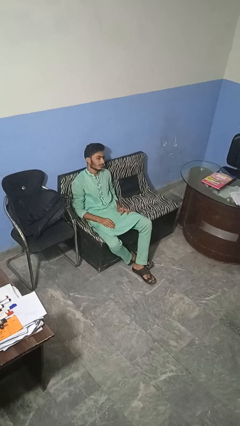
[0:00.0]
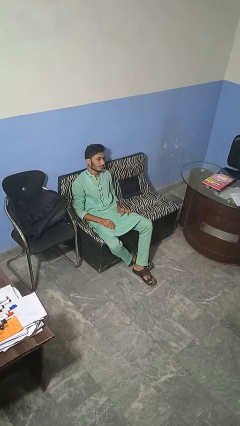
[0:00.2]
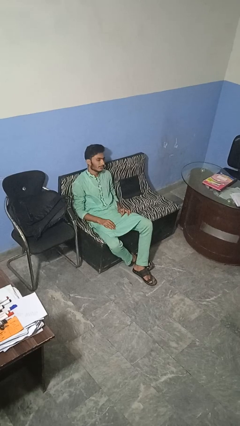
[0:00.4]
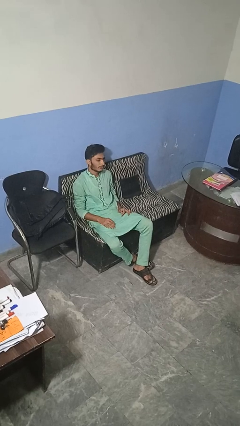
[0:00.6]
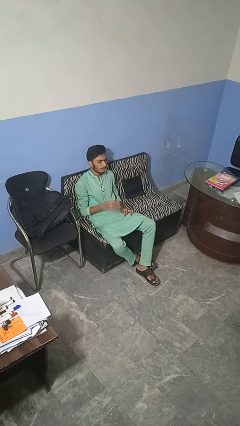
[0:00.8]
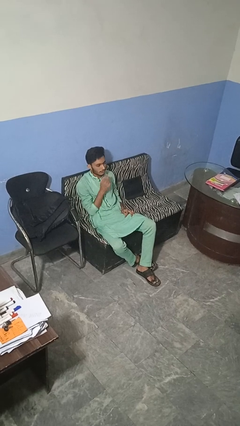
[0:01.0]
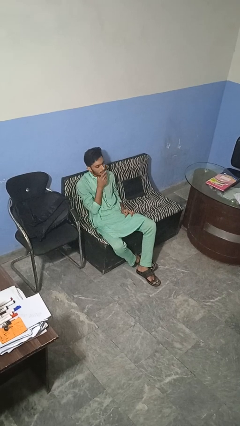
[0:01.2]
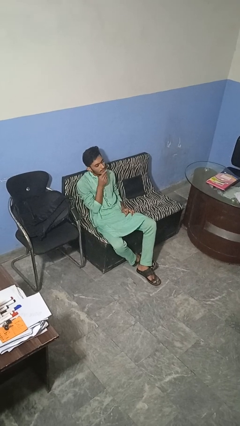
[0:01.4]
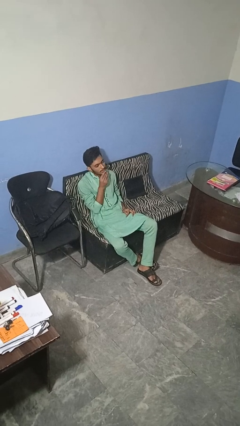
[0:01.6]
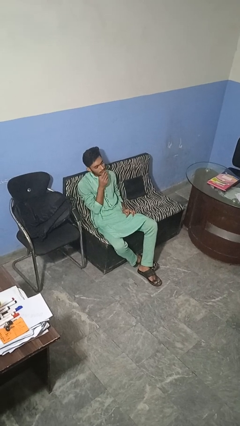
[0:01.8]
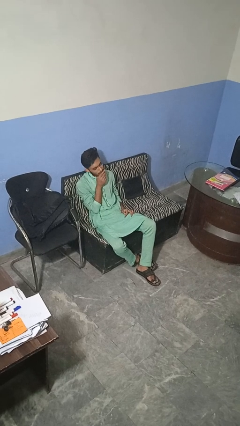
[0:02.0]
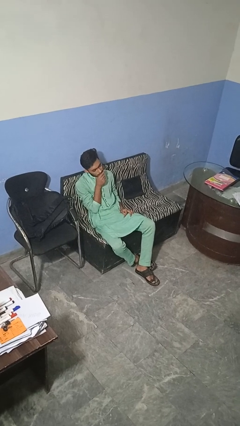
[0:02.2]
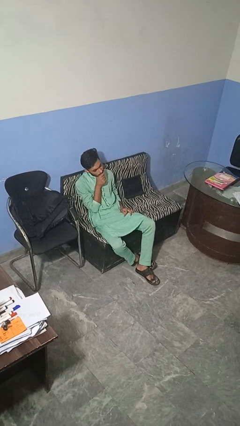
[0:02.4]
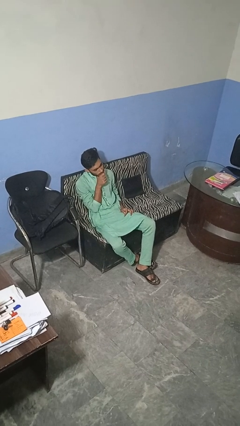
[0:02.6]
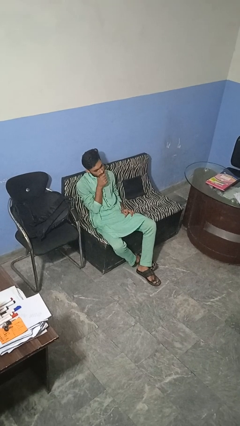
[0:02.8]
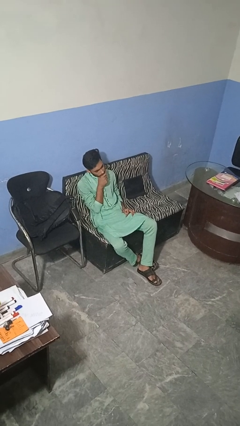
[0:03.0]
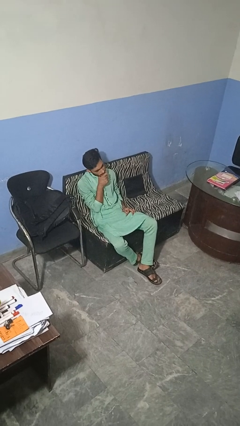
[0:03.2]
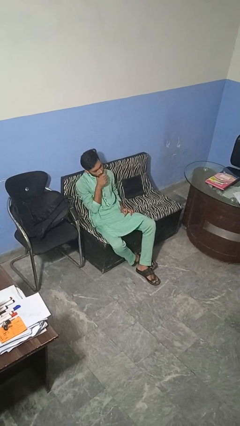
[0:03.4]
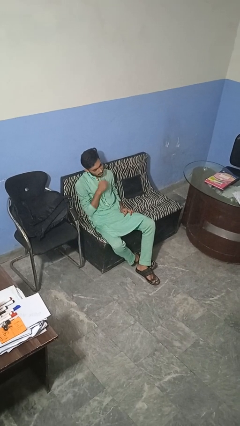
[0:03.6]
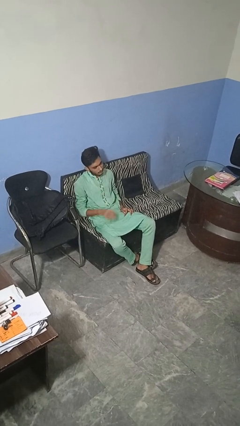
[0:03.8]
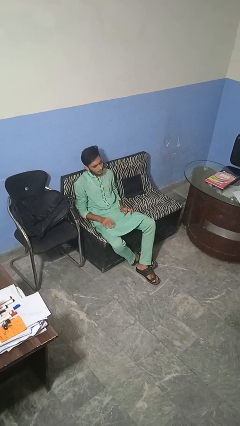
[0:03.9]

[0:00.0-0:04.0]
person strokes chin

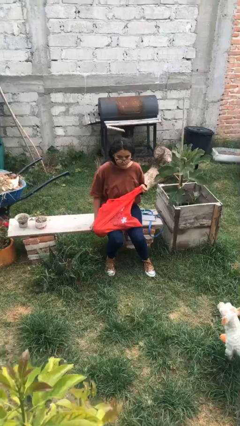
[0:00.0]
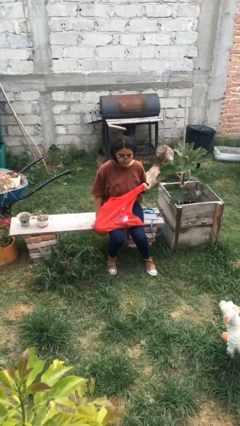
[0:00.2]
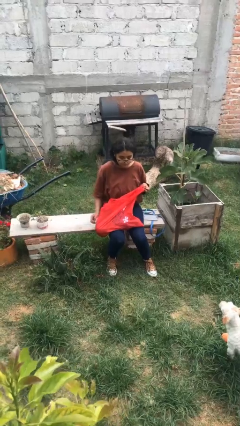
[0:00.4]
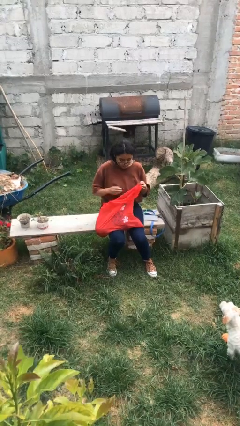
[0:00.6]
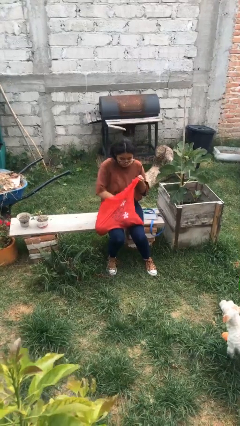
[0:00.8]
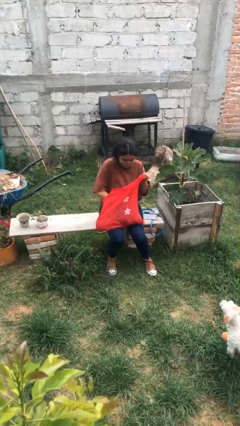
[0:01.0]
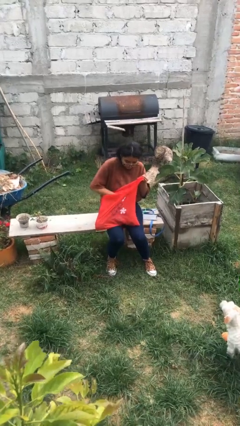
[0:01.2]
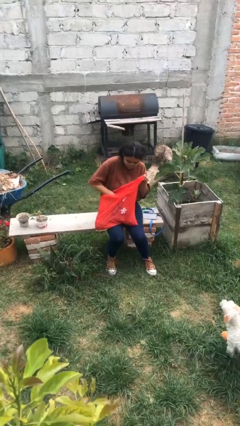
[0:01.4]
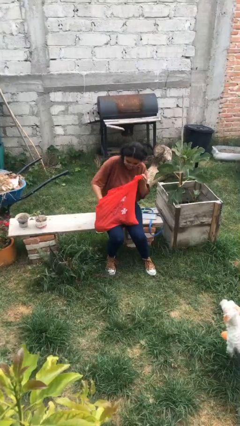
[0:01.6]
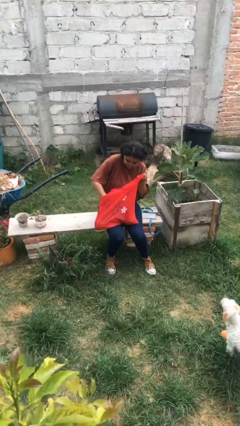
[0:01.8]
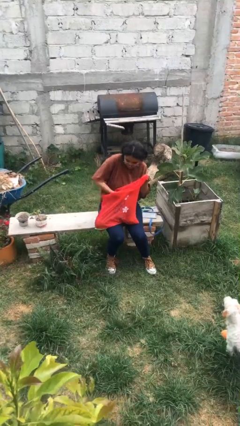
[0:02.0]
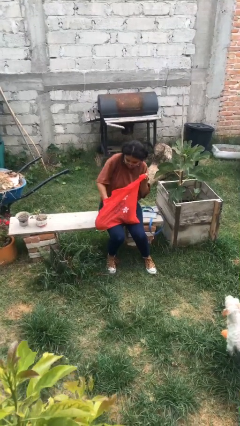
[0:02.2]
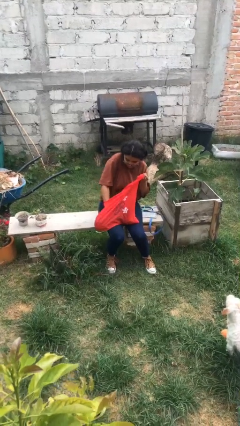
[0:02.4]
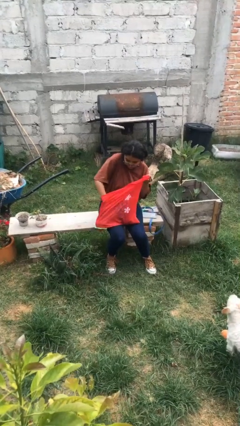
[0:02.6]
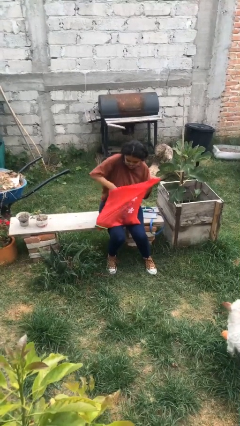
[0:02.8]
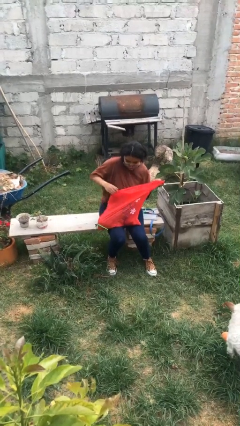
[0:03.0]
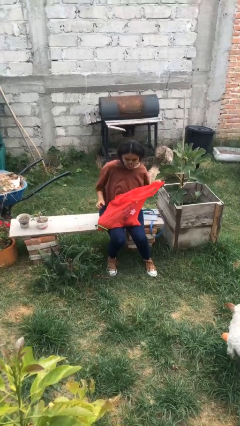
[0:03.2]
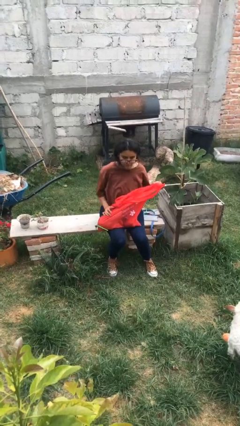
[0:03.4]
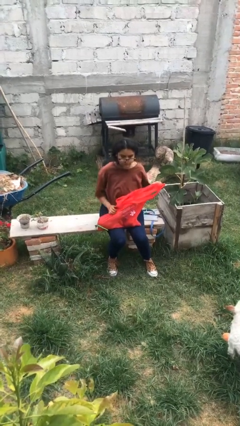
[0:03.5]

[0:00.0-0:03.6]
person searches in bag

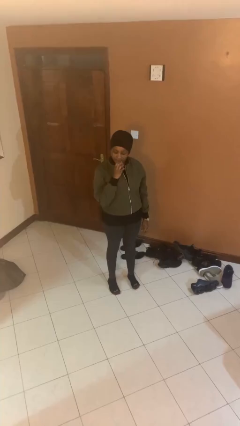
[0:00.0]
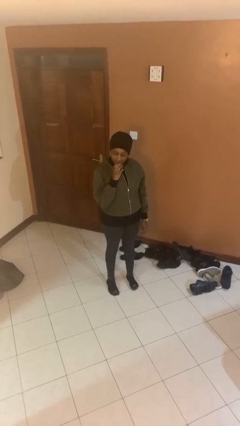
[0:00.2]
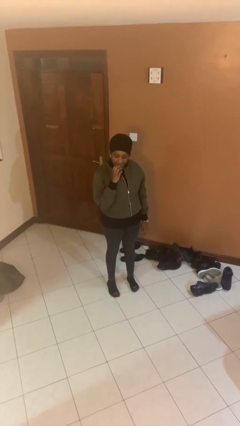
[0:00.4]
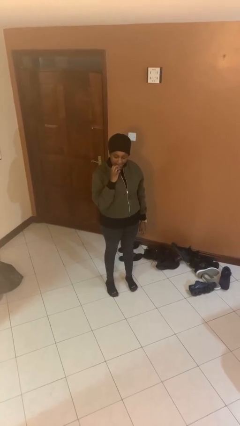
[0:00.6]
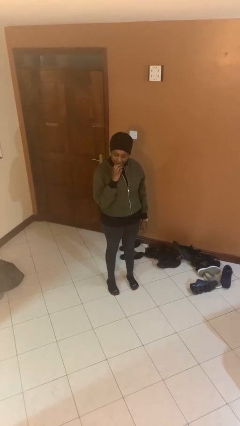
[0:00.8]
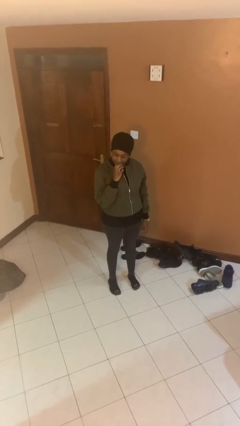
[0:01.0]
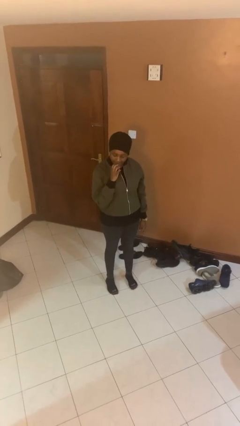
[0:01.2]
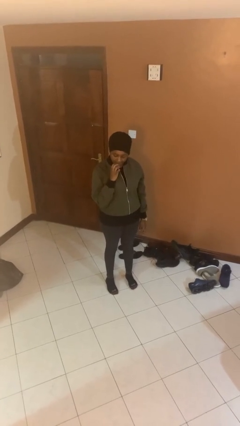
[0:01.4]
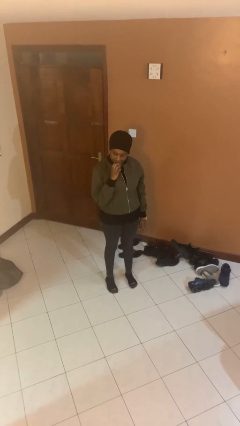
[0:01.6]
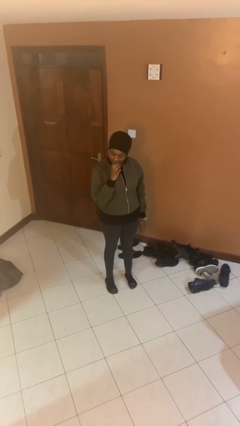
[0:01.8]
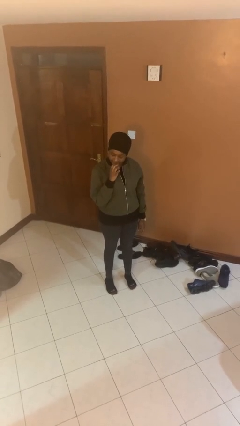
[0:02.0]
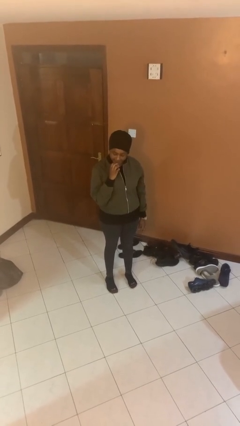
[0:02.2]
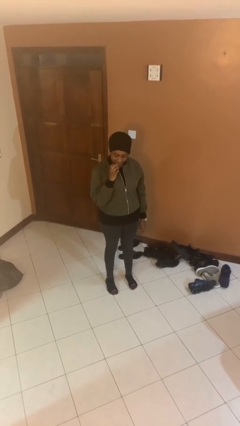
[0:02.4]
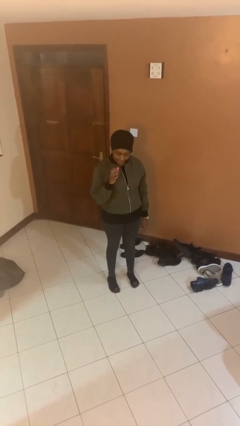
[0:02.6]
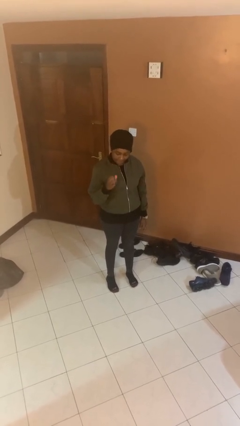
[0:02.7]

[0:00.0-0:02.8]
person applies lip makeup

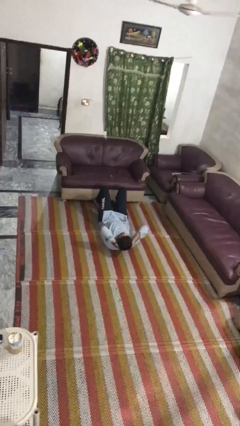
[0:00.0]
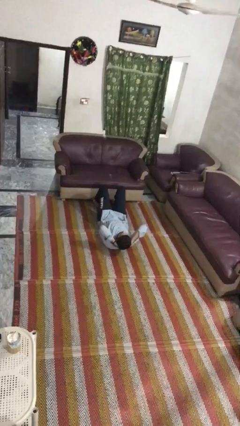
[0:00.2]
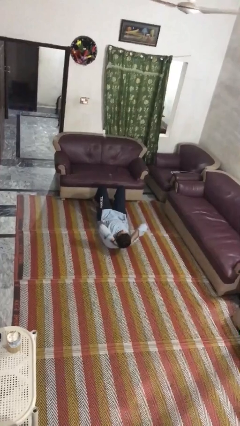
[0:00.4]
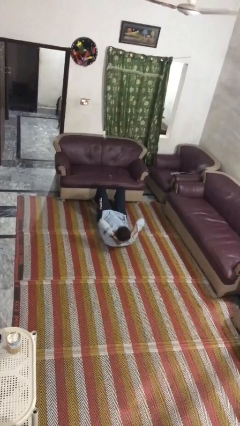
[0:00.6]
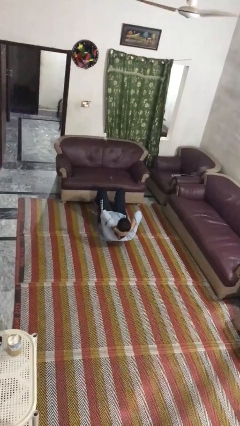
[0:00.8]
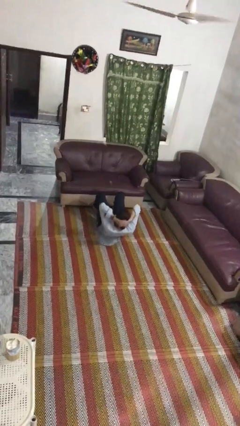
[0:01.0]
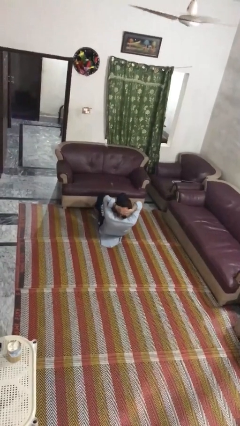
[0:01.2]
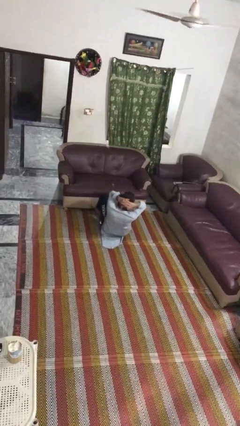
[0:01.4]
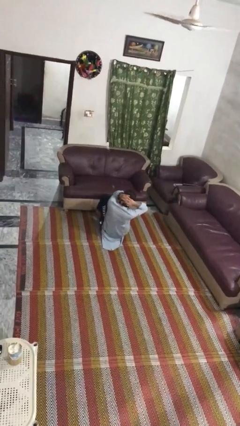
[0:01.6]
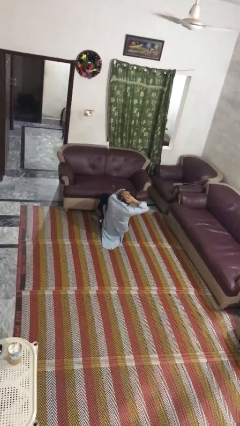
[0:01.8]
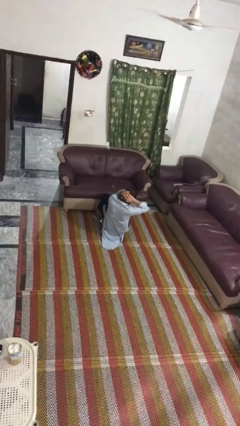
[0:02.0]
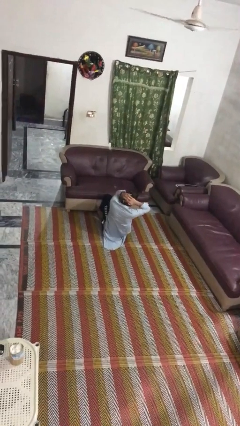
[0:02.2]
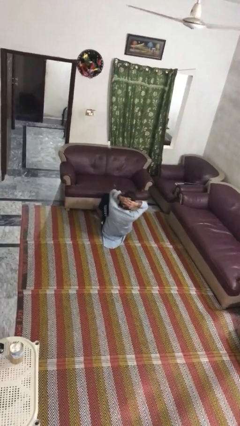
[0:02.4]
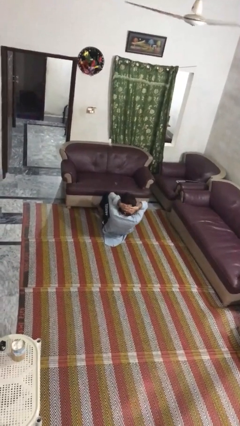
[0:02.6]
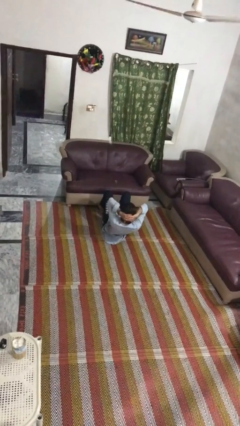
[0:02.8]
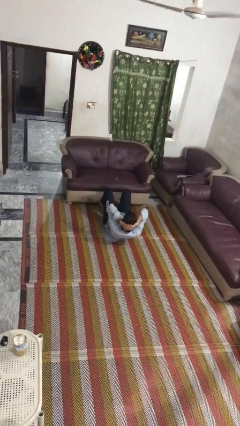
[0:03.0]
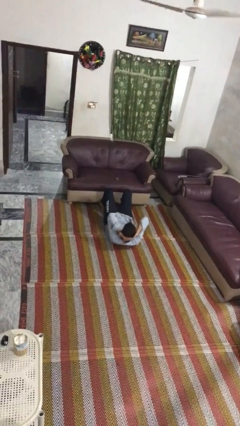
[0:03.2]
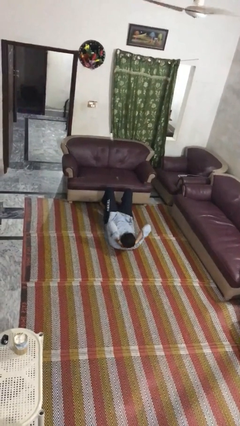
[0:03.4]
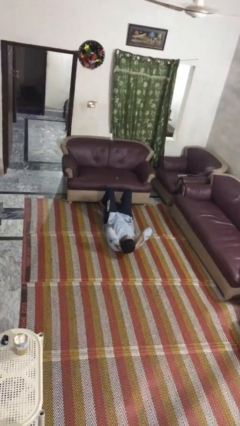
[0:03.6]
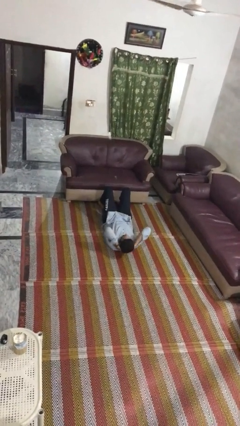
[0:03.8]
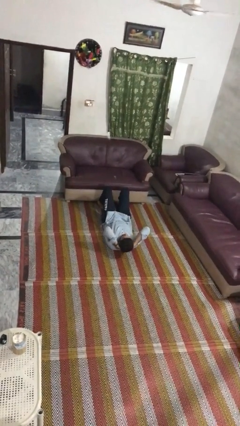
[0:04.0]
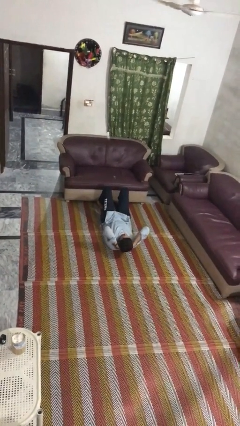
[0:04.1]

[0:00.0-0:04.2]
person exercises with situp

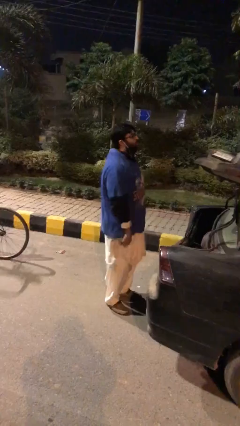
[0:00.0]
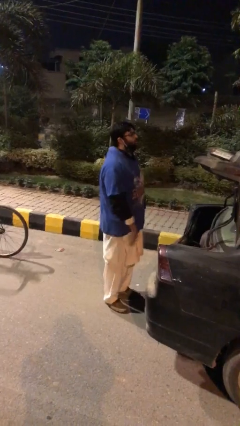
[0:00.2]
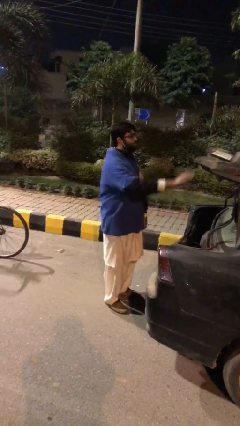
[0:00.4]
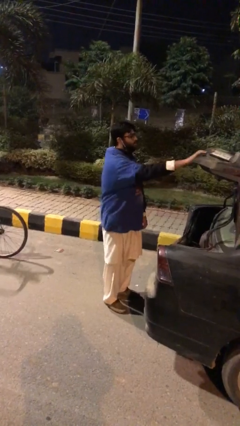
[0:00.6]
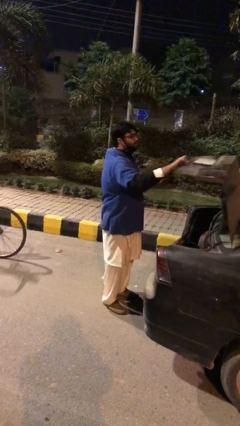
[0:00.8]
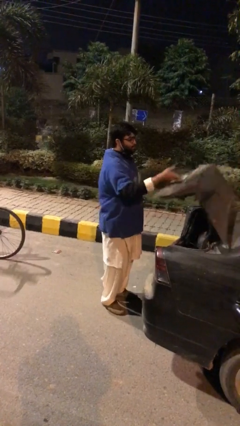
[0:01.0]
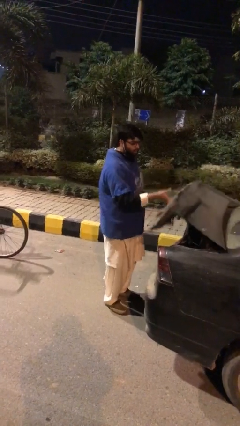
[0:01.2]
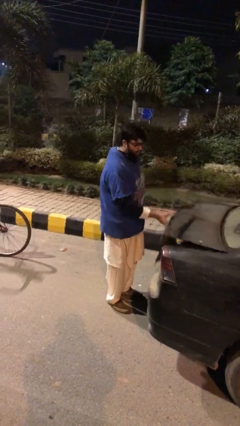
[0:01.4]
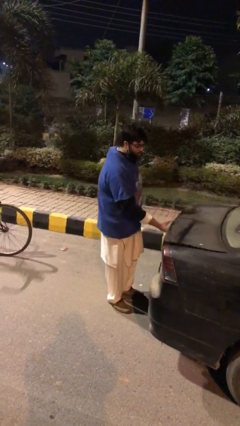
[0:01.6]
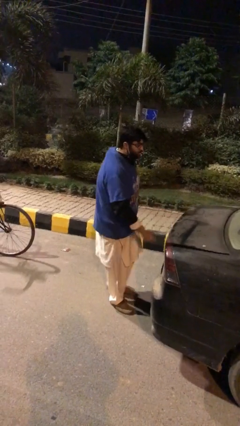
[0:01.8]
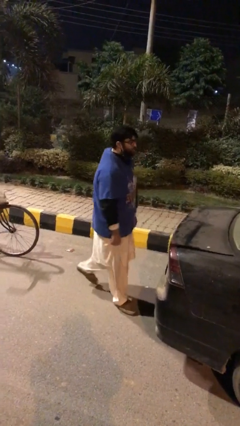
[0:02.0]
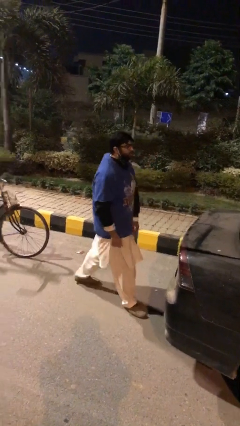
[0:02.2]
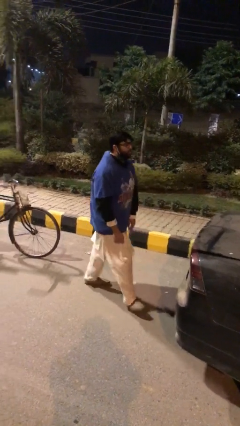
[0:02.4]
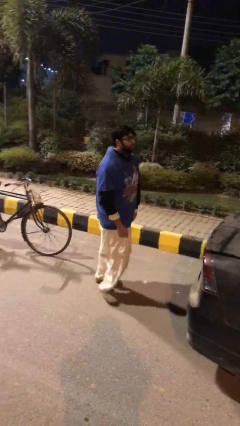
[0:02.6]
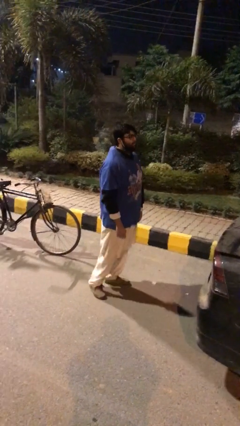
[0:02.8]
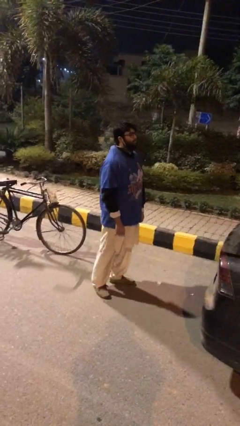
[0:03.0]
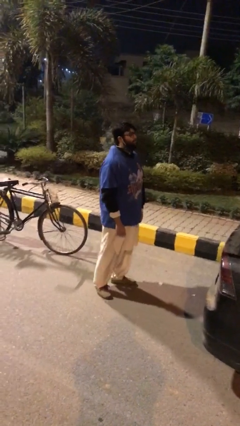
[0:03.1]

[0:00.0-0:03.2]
person closes car trunk
